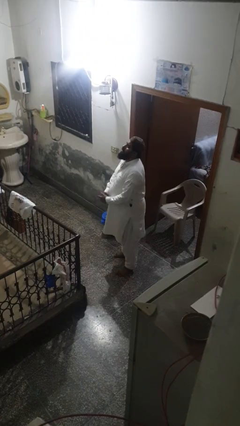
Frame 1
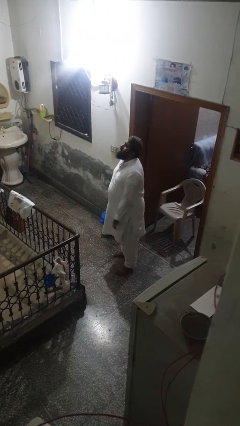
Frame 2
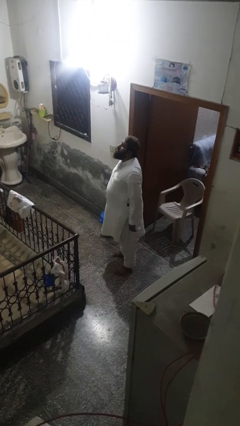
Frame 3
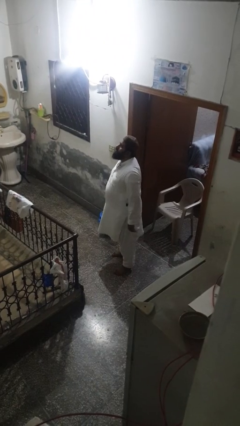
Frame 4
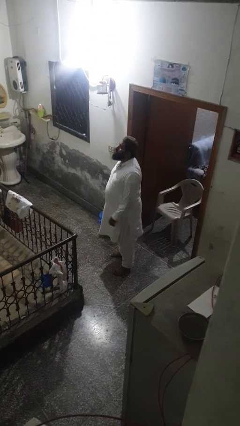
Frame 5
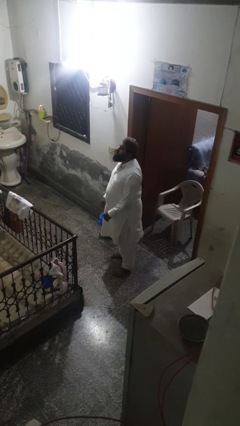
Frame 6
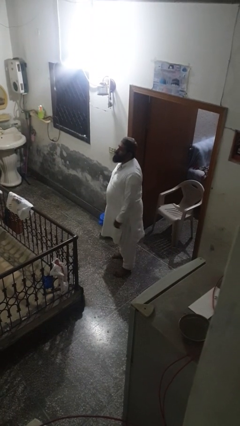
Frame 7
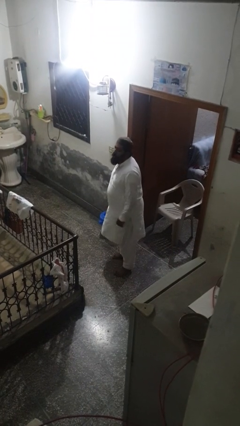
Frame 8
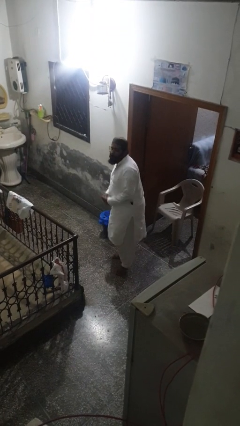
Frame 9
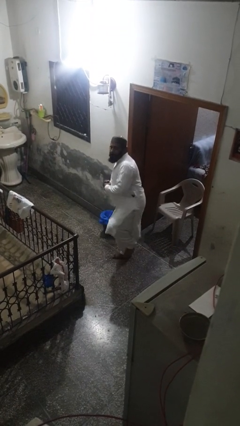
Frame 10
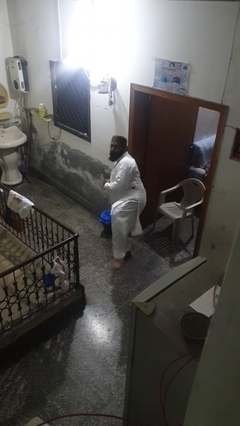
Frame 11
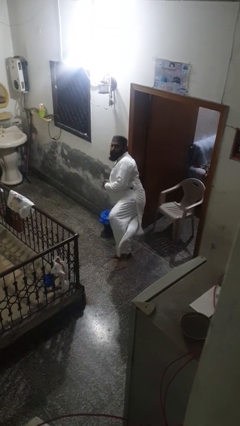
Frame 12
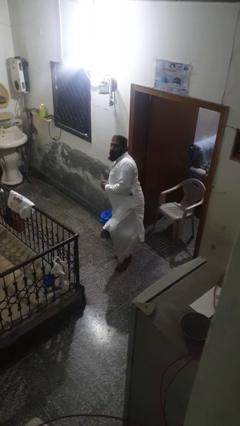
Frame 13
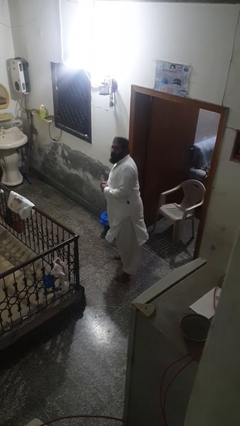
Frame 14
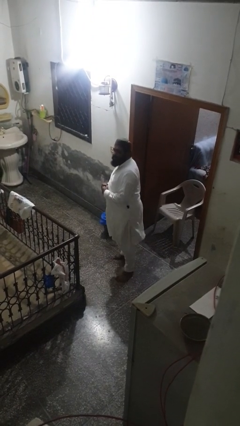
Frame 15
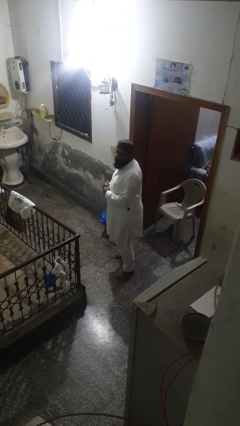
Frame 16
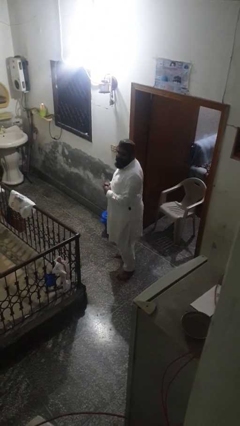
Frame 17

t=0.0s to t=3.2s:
person karate kicks

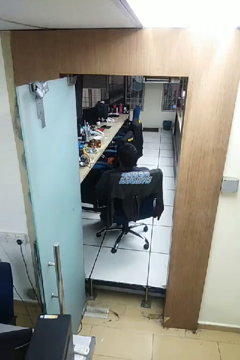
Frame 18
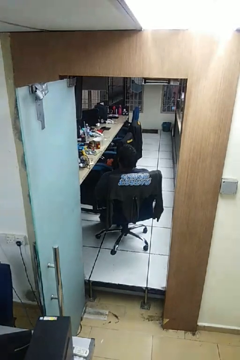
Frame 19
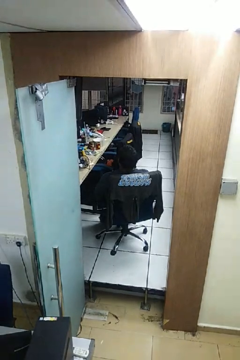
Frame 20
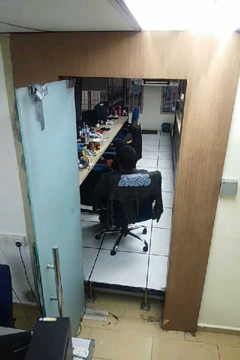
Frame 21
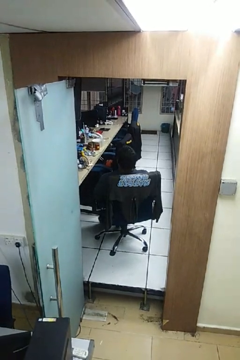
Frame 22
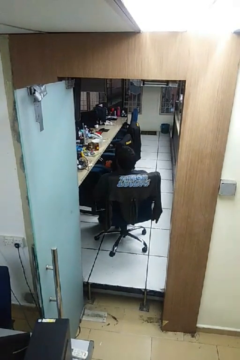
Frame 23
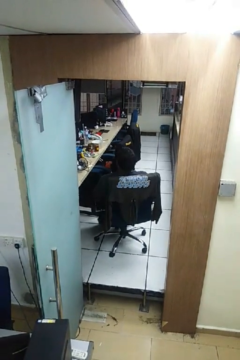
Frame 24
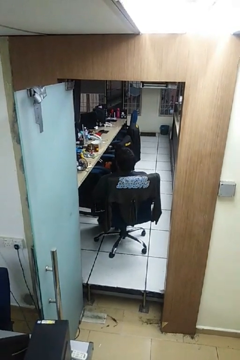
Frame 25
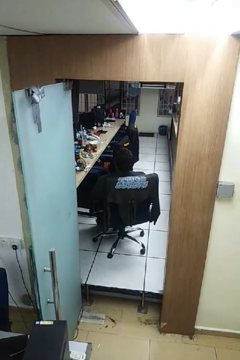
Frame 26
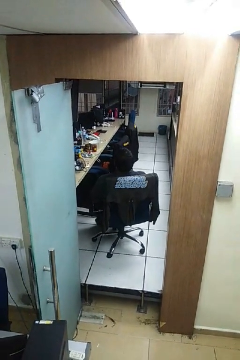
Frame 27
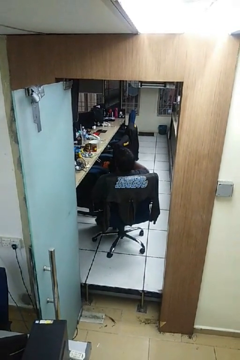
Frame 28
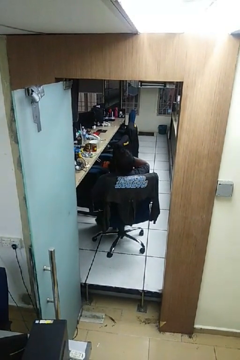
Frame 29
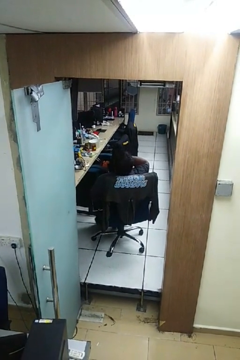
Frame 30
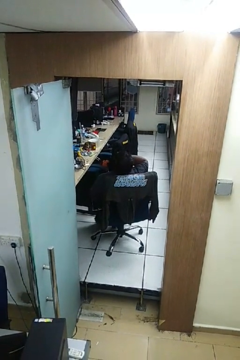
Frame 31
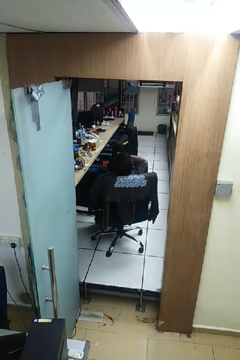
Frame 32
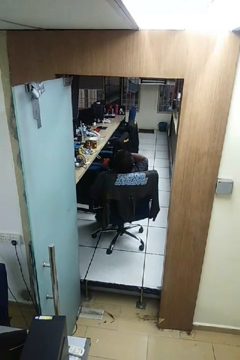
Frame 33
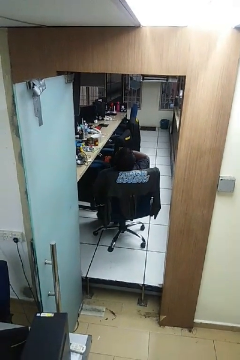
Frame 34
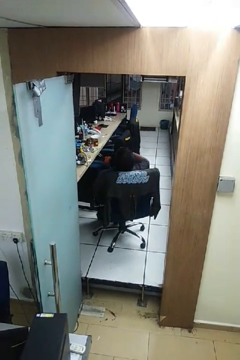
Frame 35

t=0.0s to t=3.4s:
person yawns

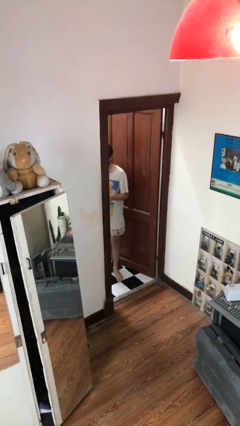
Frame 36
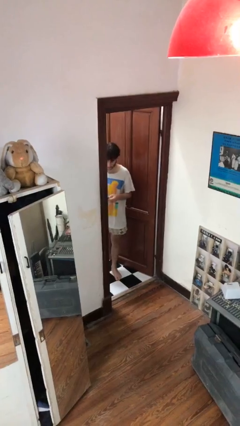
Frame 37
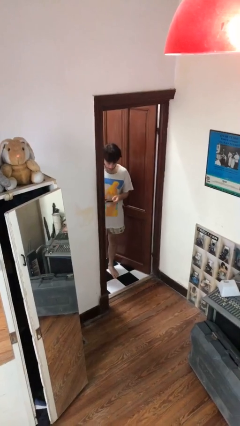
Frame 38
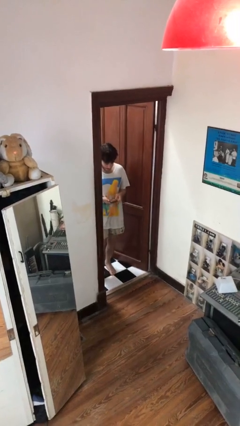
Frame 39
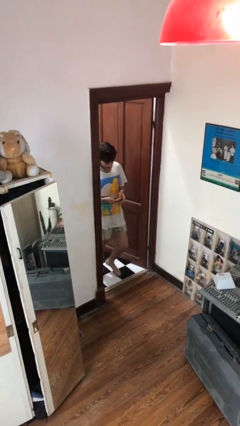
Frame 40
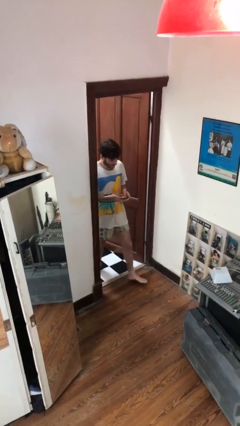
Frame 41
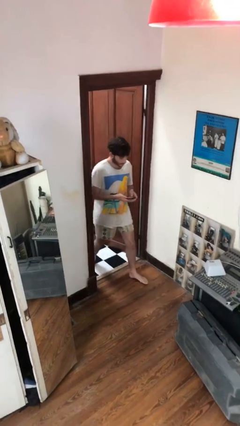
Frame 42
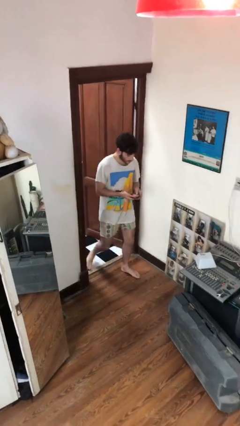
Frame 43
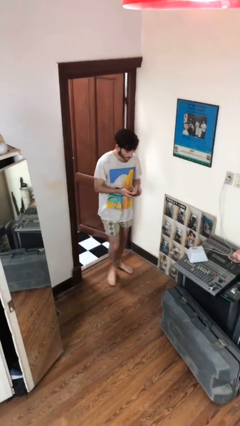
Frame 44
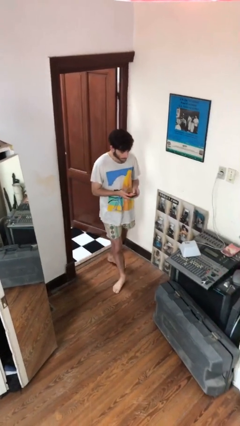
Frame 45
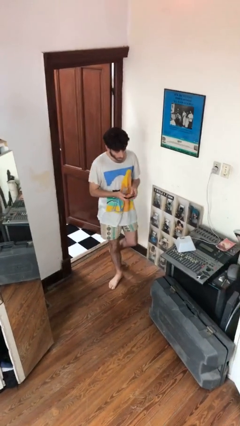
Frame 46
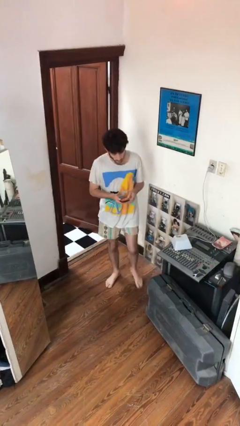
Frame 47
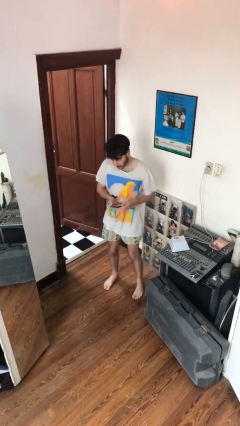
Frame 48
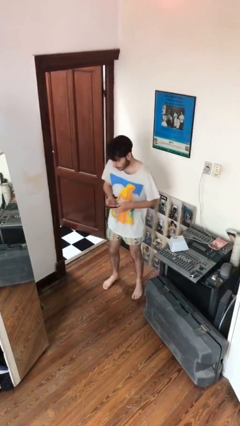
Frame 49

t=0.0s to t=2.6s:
person enters scene through structure

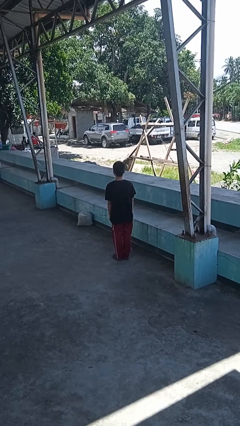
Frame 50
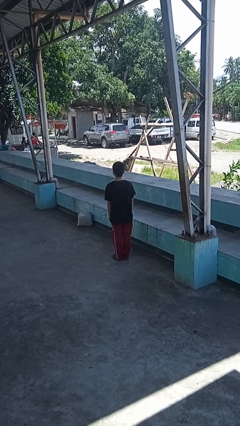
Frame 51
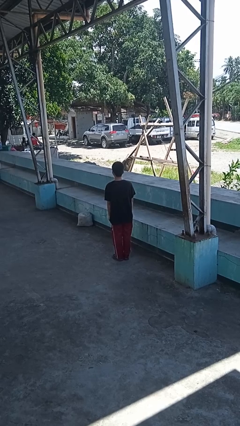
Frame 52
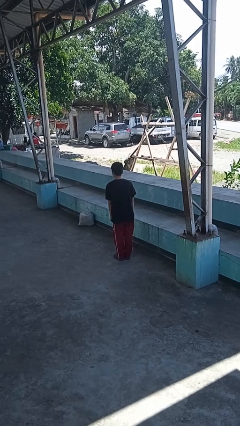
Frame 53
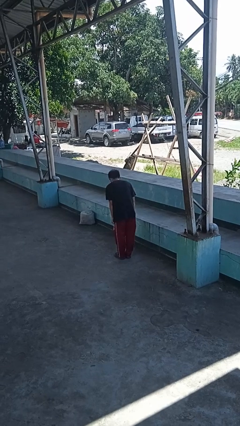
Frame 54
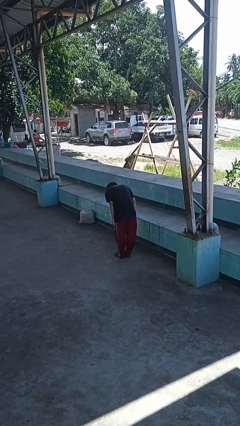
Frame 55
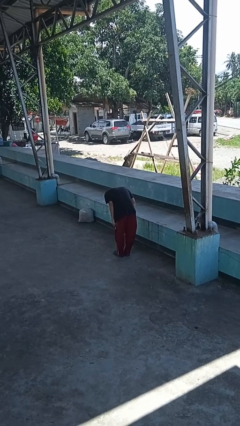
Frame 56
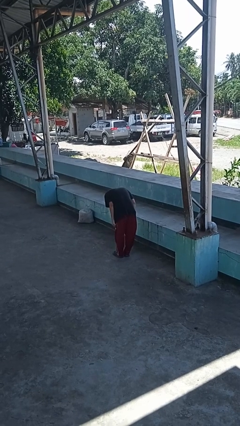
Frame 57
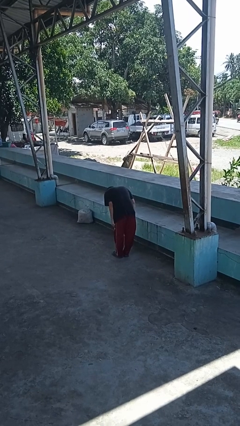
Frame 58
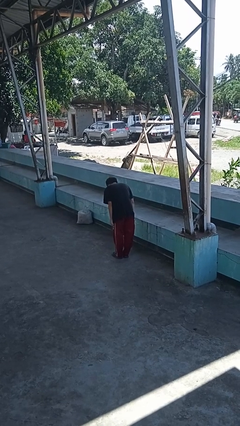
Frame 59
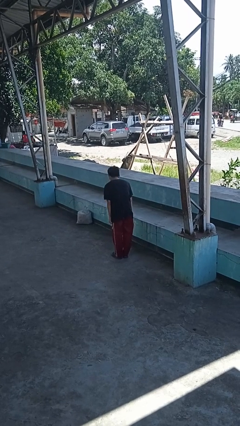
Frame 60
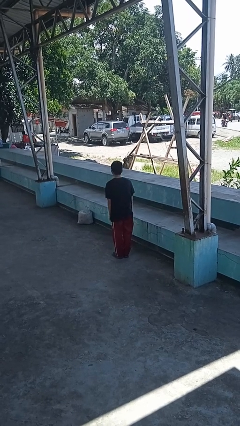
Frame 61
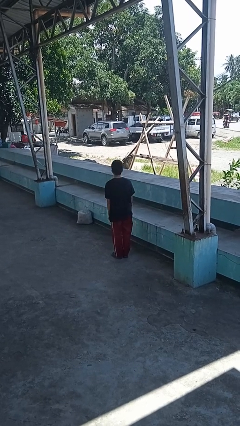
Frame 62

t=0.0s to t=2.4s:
person bows

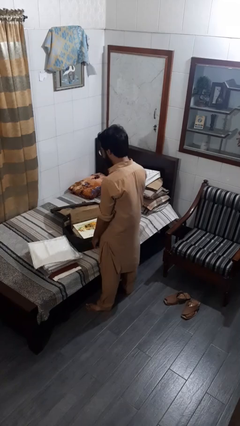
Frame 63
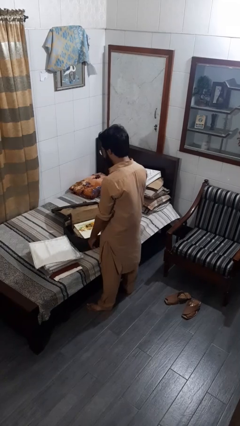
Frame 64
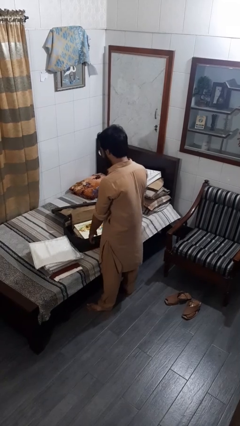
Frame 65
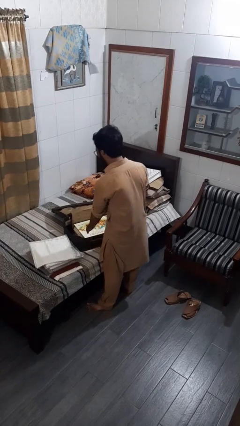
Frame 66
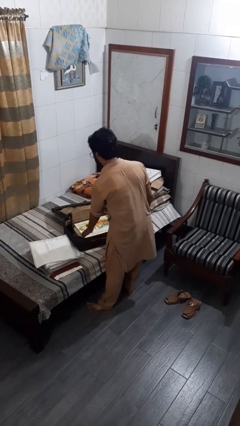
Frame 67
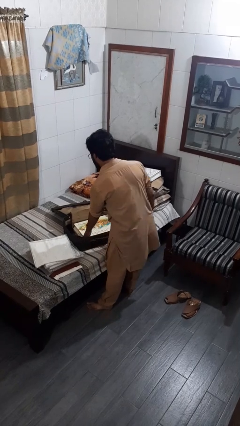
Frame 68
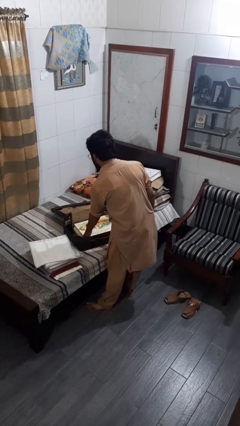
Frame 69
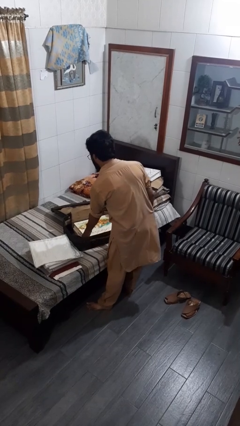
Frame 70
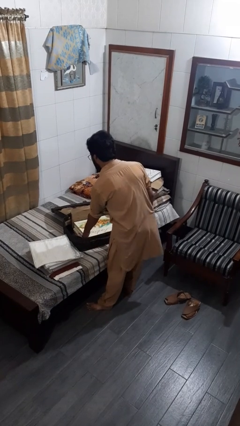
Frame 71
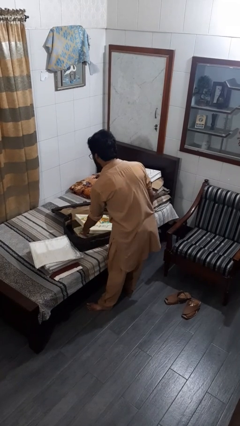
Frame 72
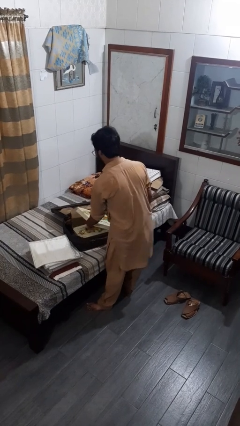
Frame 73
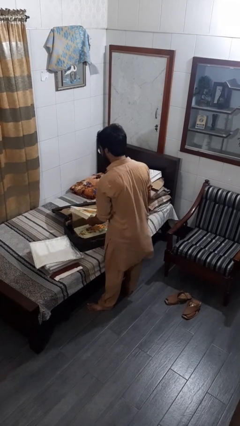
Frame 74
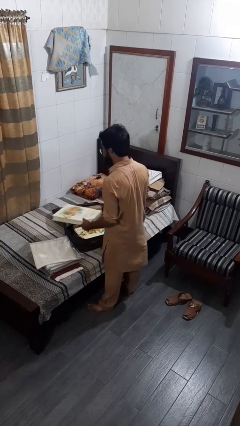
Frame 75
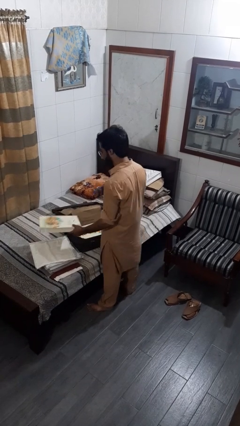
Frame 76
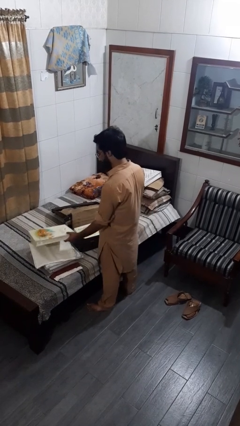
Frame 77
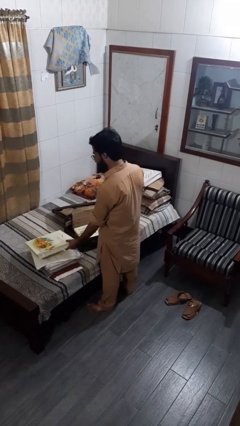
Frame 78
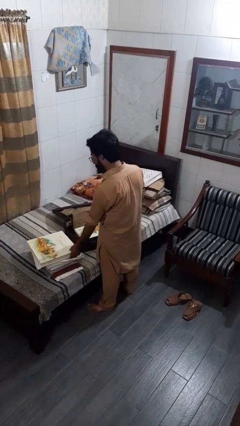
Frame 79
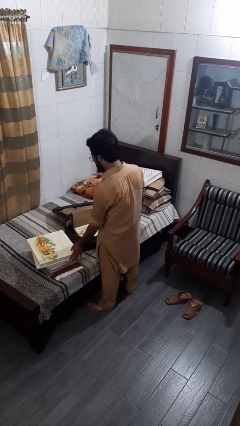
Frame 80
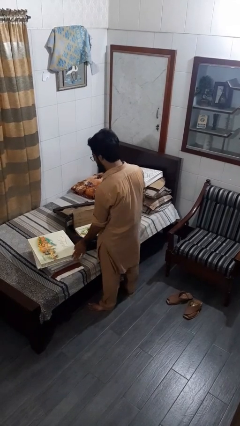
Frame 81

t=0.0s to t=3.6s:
person unloads clothes from suitcase

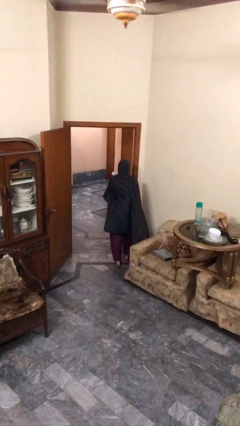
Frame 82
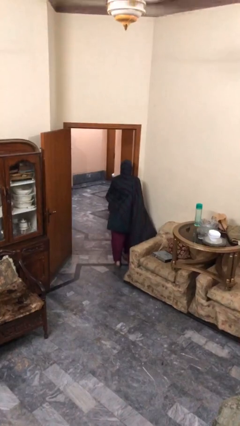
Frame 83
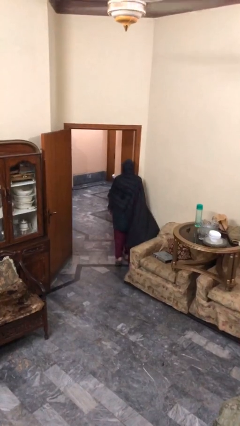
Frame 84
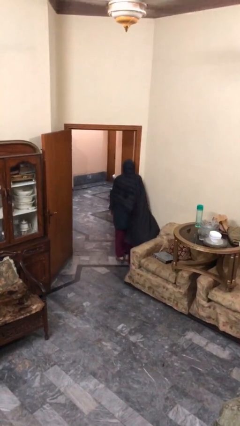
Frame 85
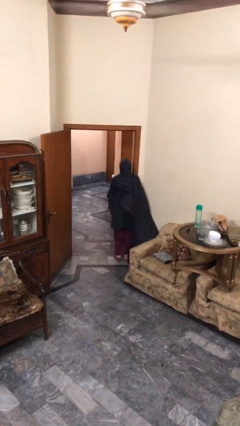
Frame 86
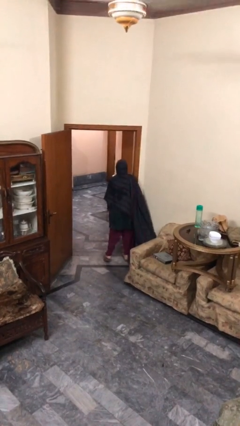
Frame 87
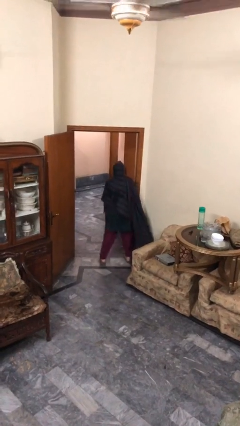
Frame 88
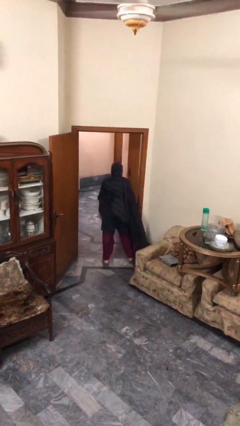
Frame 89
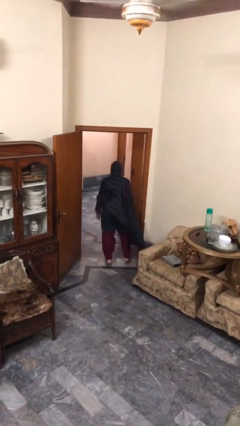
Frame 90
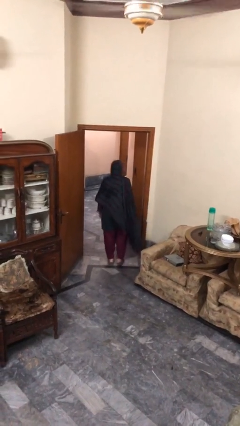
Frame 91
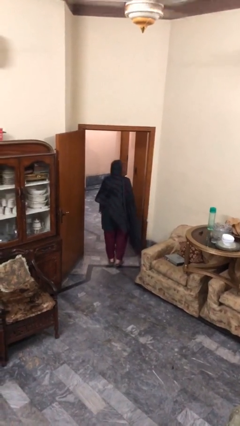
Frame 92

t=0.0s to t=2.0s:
person bumps into wall

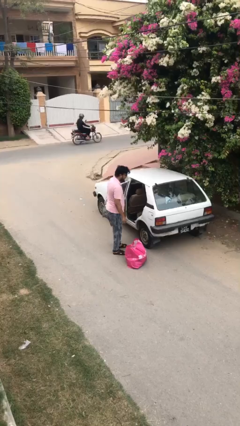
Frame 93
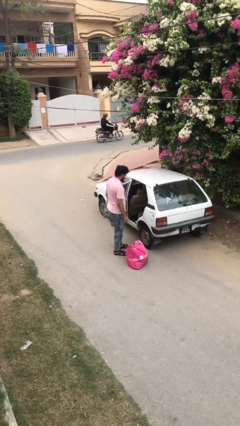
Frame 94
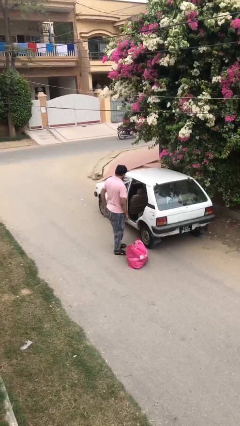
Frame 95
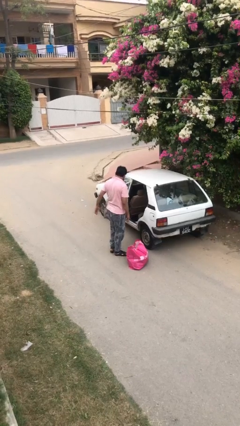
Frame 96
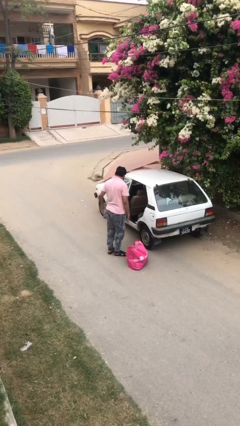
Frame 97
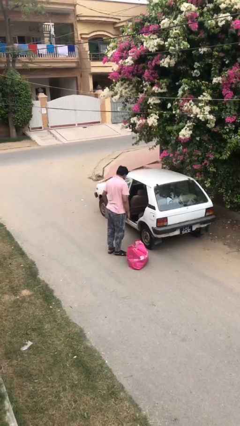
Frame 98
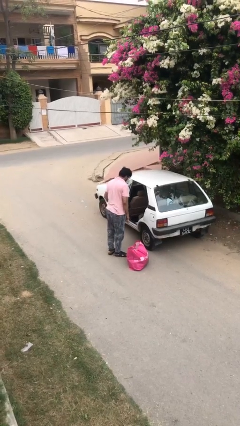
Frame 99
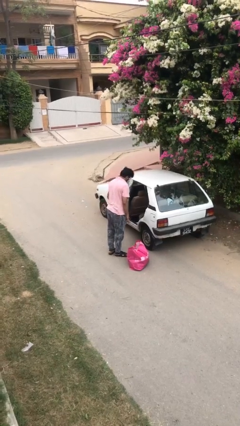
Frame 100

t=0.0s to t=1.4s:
person closes car door
